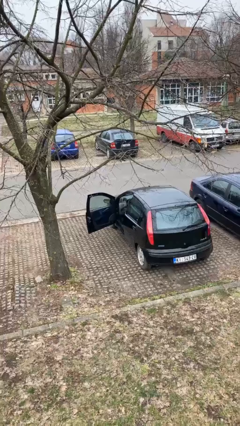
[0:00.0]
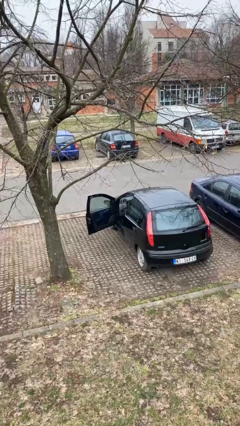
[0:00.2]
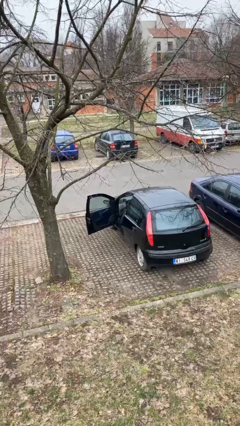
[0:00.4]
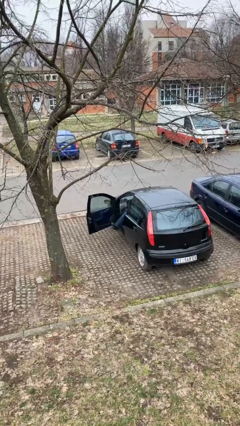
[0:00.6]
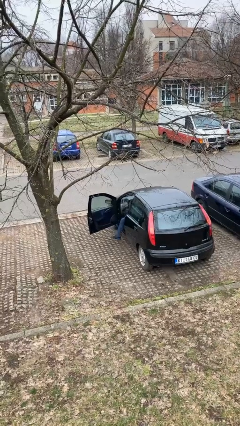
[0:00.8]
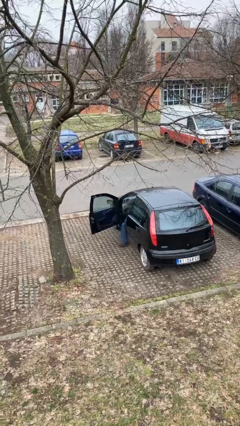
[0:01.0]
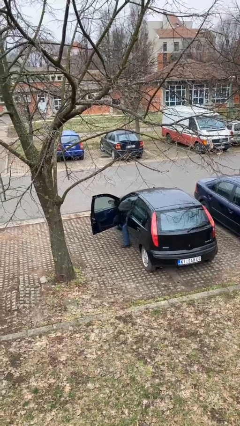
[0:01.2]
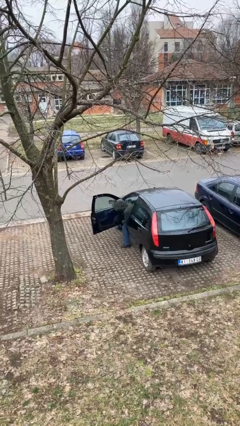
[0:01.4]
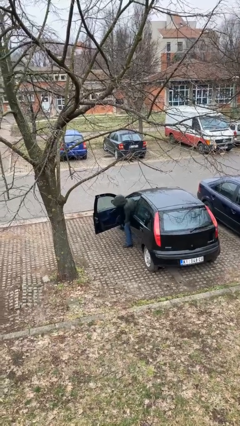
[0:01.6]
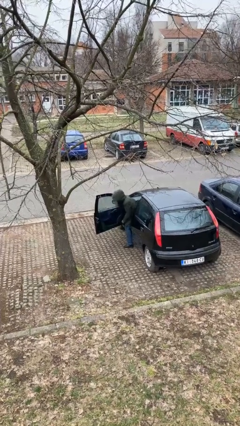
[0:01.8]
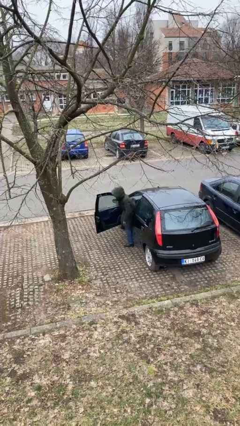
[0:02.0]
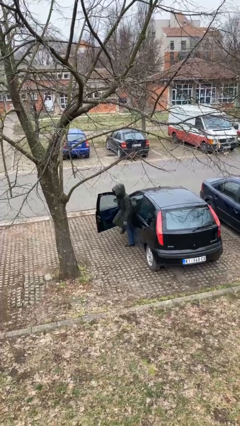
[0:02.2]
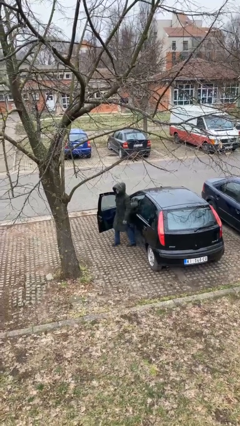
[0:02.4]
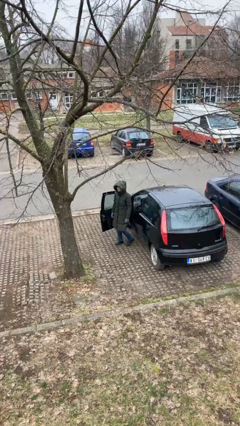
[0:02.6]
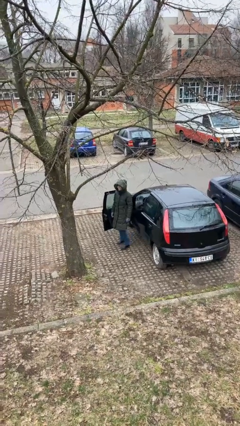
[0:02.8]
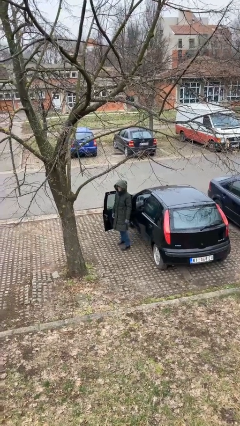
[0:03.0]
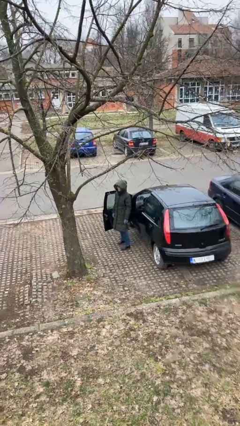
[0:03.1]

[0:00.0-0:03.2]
person exits car

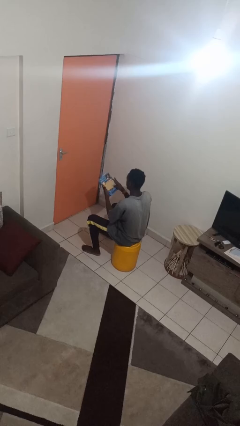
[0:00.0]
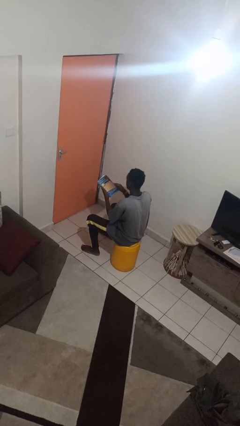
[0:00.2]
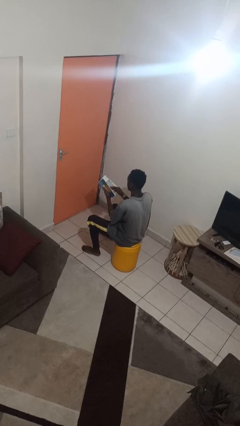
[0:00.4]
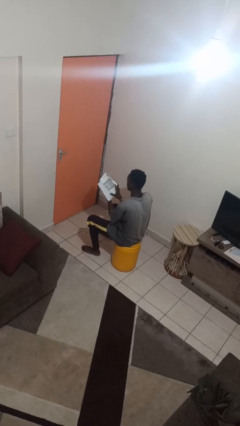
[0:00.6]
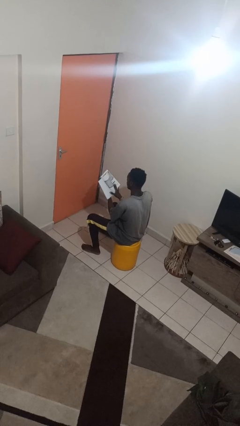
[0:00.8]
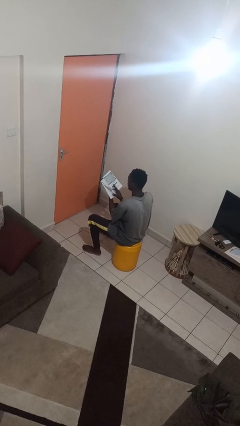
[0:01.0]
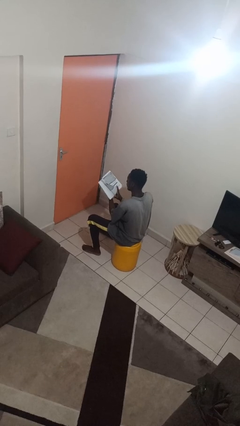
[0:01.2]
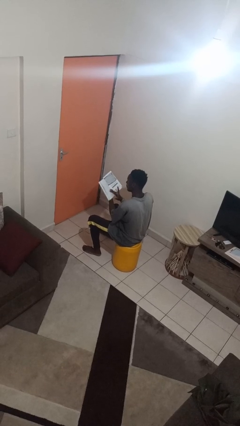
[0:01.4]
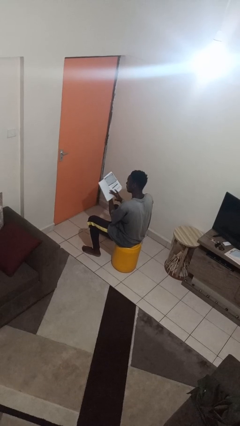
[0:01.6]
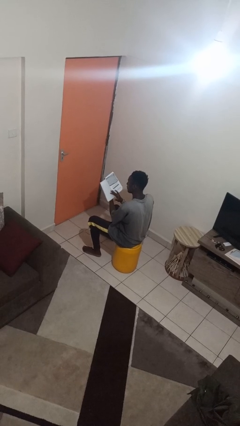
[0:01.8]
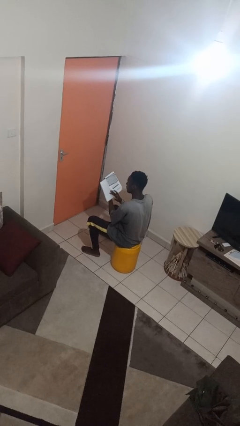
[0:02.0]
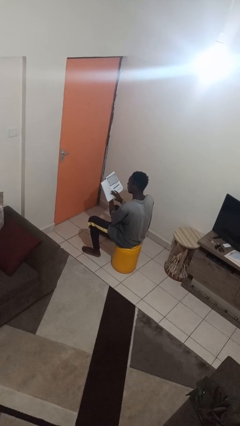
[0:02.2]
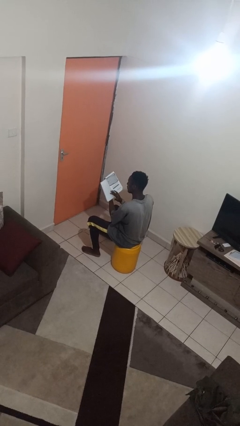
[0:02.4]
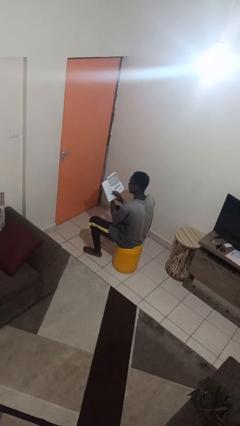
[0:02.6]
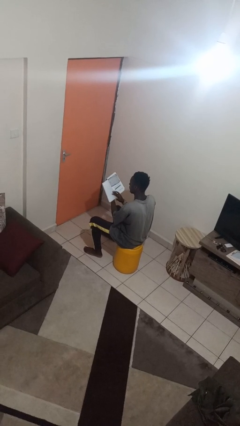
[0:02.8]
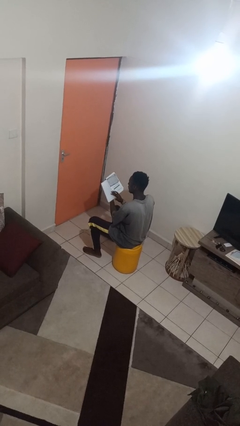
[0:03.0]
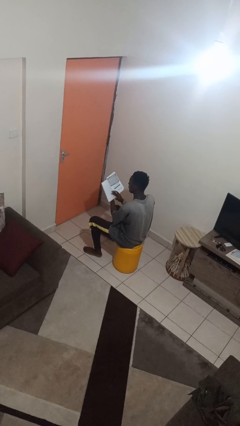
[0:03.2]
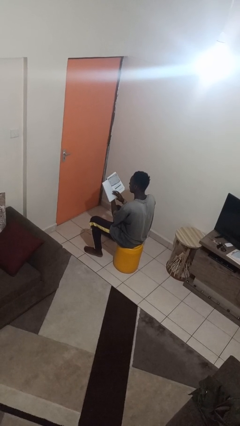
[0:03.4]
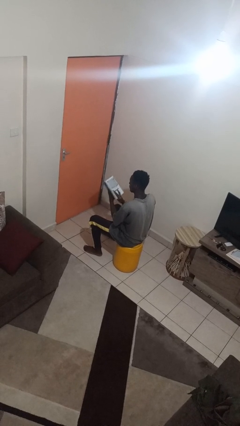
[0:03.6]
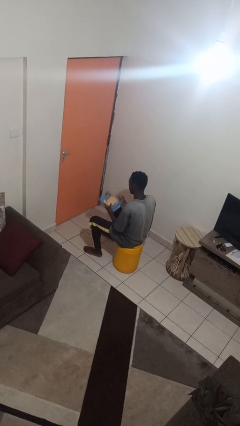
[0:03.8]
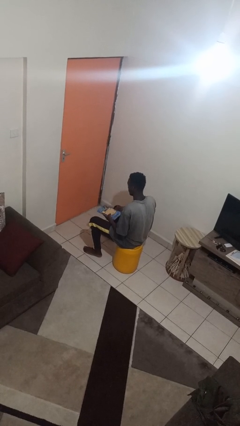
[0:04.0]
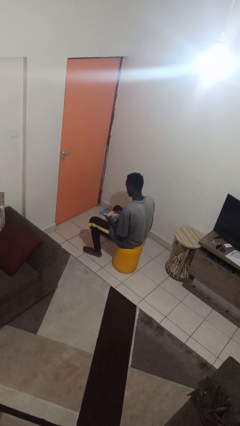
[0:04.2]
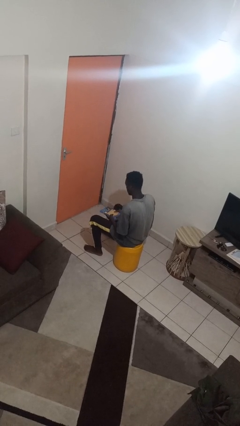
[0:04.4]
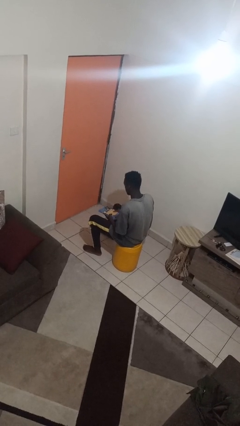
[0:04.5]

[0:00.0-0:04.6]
person reads book

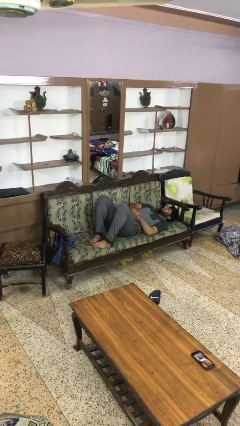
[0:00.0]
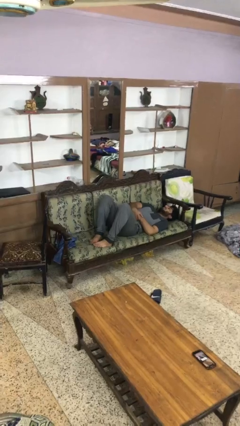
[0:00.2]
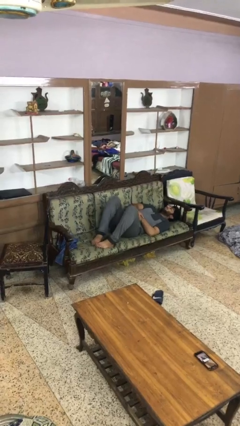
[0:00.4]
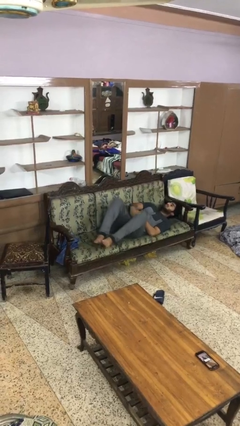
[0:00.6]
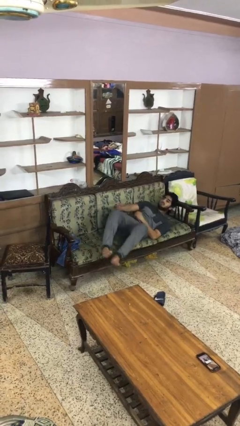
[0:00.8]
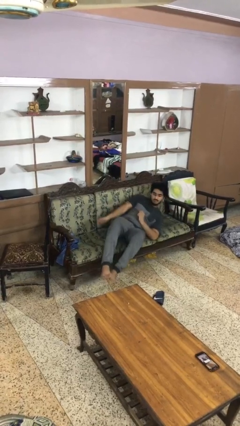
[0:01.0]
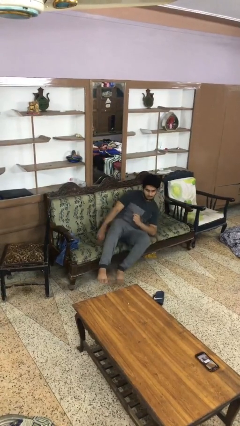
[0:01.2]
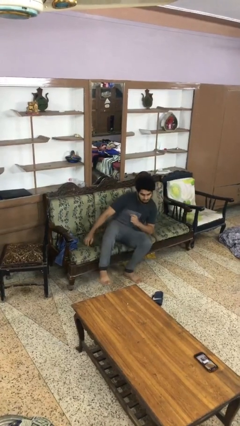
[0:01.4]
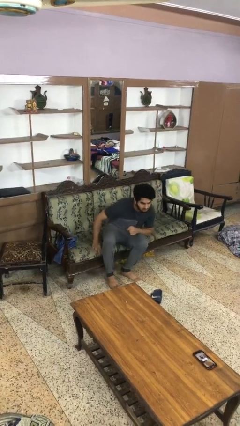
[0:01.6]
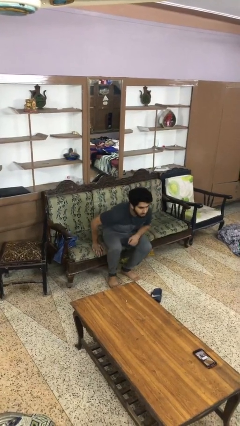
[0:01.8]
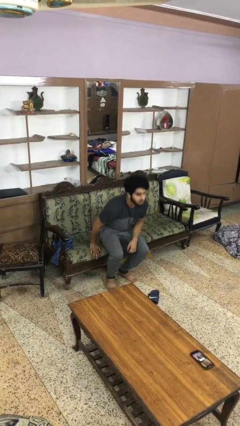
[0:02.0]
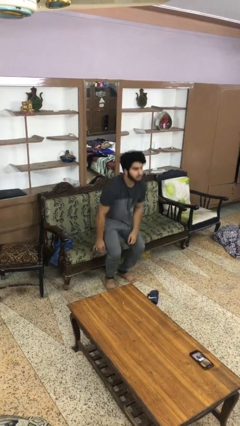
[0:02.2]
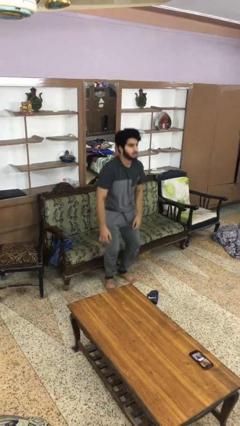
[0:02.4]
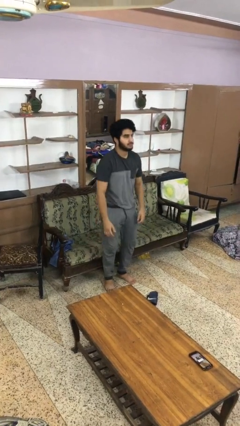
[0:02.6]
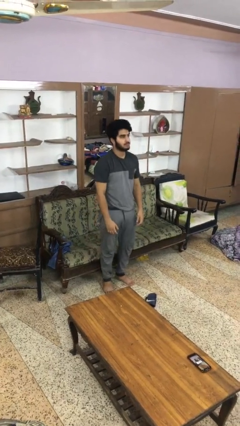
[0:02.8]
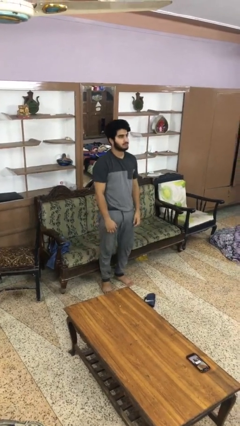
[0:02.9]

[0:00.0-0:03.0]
person stands up

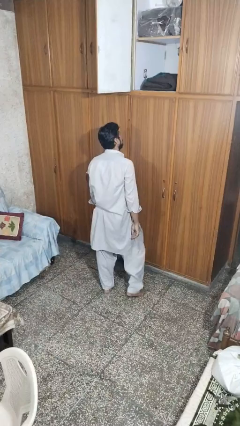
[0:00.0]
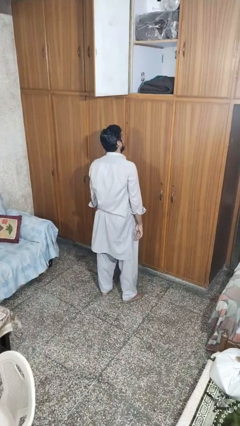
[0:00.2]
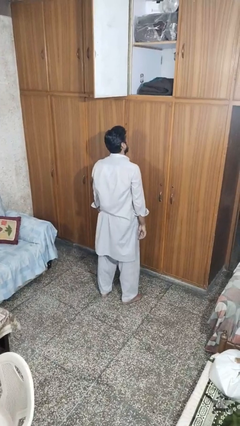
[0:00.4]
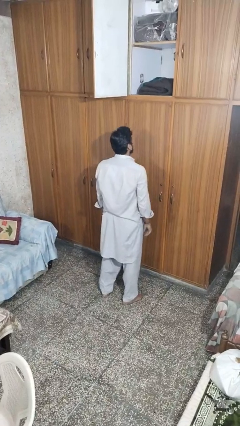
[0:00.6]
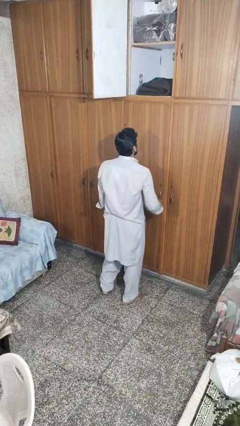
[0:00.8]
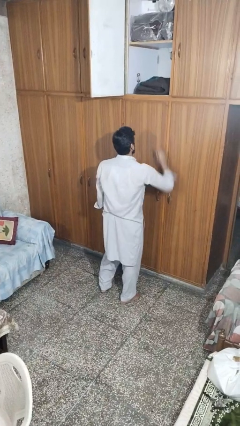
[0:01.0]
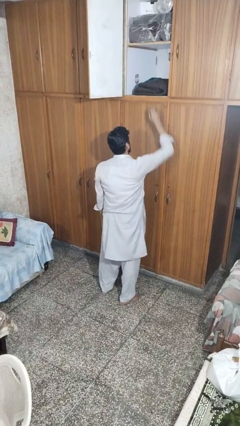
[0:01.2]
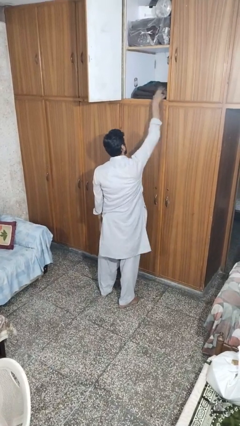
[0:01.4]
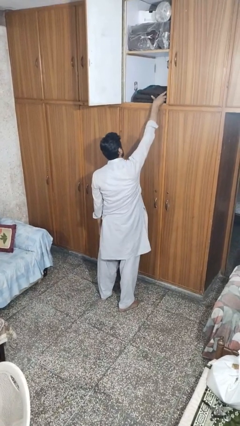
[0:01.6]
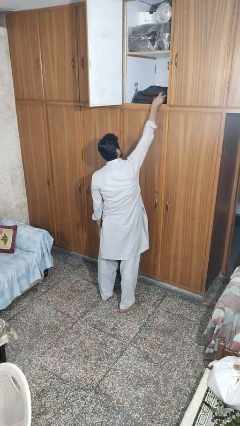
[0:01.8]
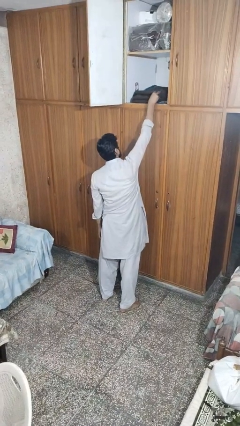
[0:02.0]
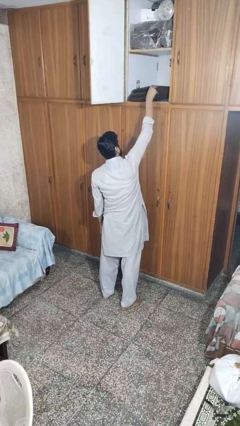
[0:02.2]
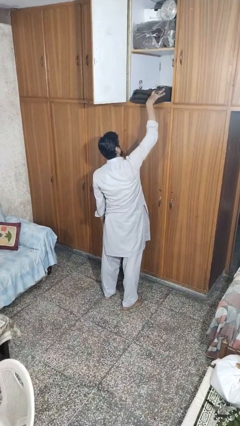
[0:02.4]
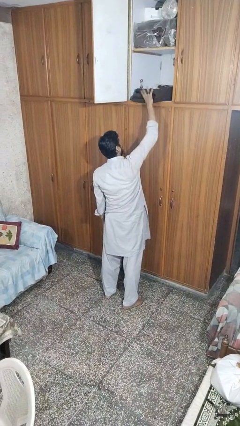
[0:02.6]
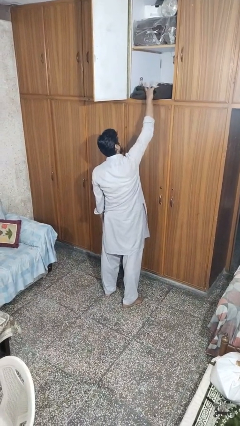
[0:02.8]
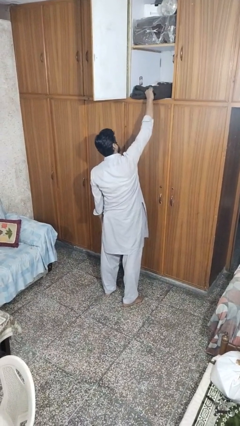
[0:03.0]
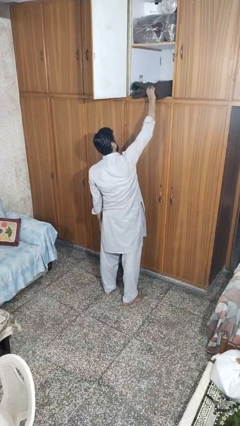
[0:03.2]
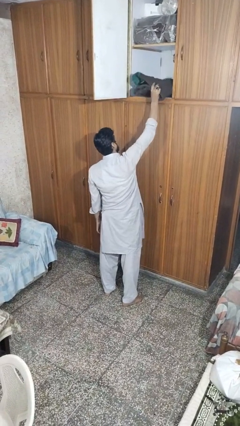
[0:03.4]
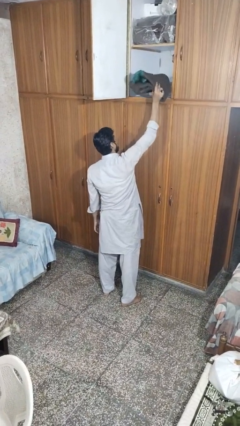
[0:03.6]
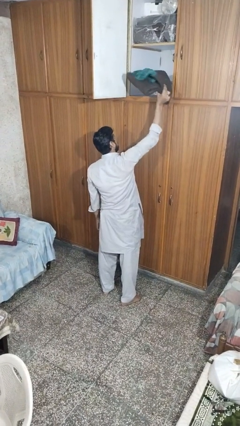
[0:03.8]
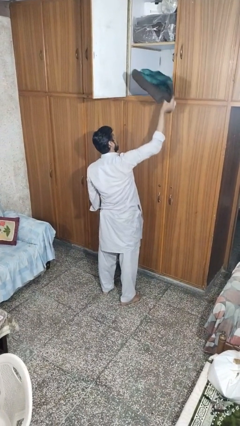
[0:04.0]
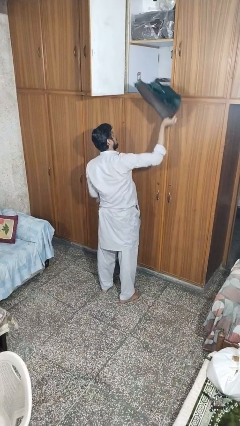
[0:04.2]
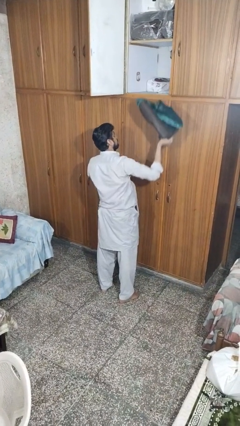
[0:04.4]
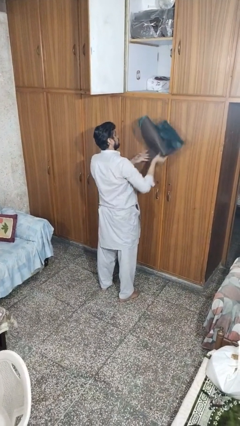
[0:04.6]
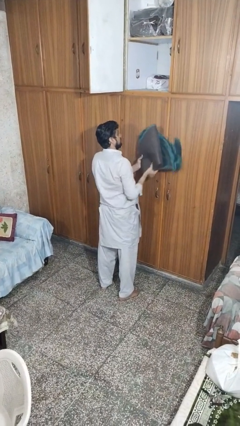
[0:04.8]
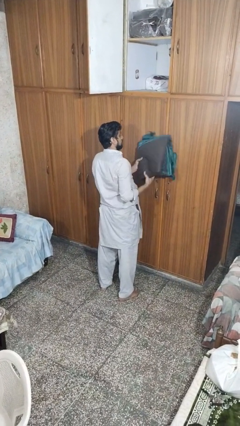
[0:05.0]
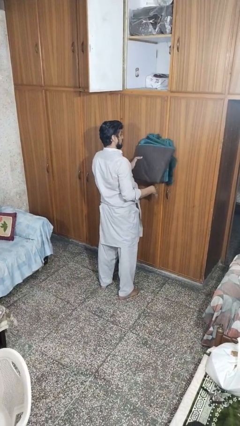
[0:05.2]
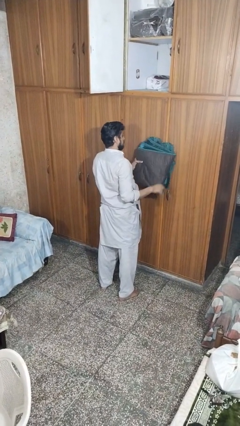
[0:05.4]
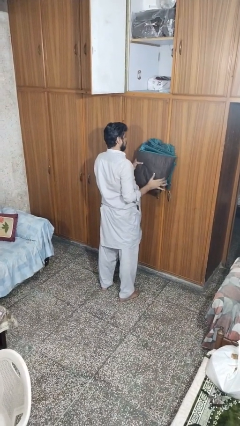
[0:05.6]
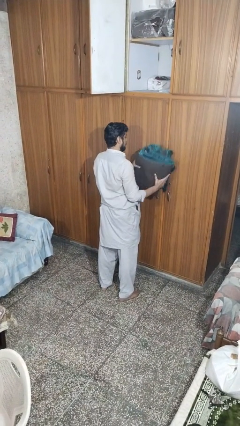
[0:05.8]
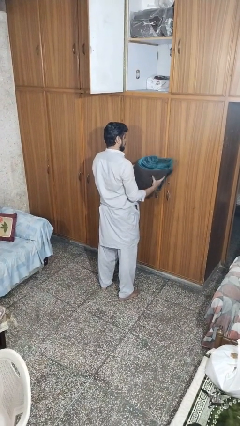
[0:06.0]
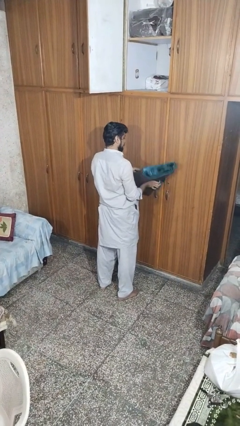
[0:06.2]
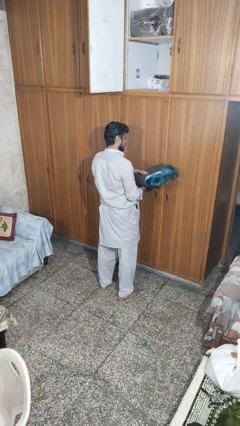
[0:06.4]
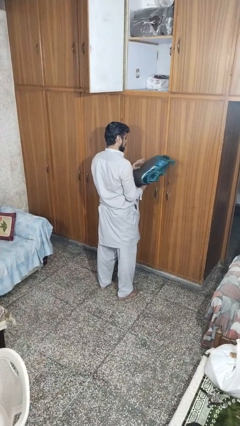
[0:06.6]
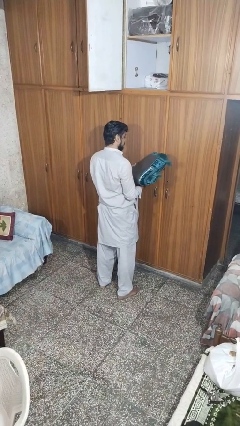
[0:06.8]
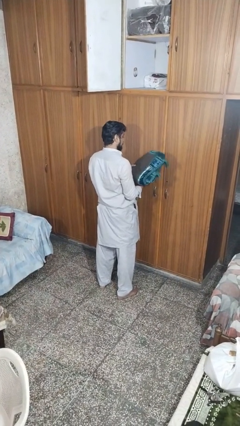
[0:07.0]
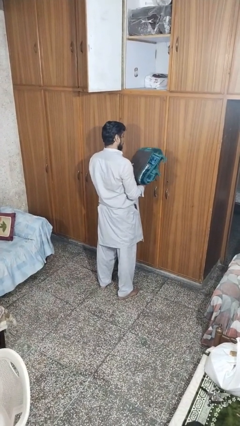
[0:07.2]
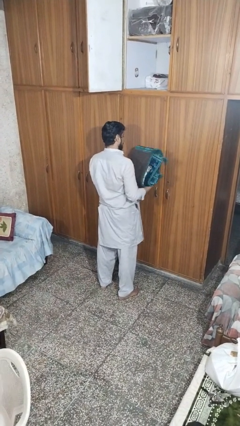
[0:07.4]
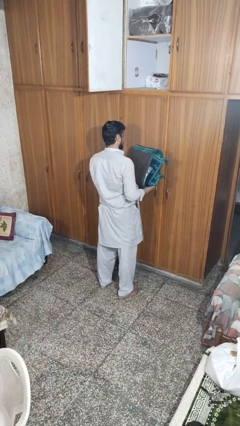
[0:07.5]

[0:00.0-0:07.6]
person picks up object from shelf
